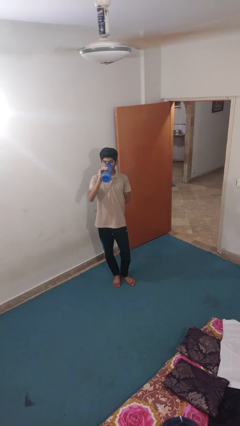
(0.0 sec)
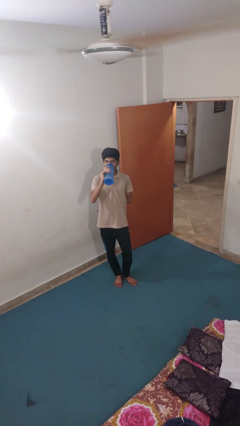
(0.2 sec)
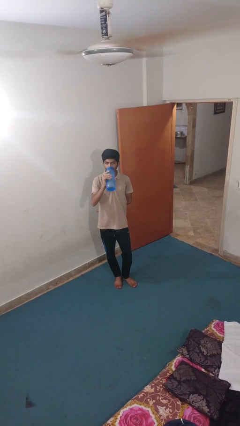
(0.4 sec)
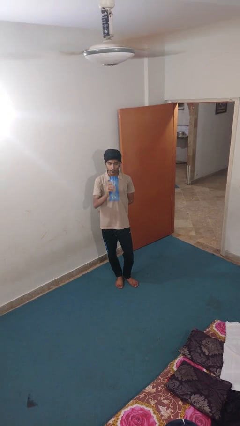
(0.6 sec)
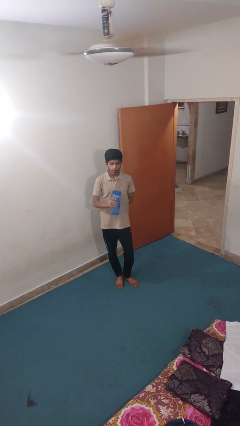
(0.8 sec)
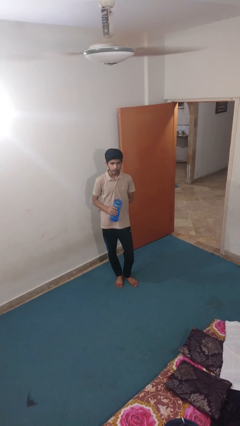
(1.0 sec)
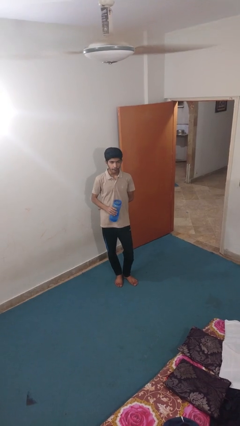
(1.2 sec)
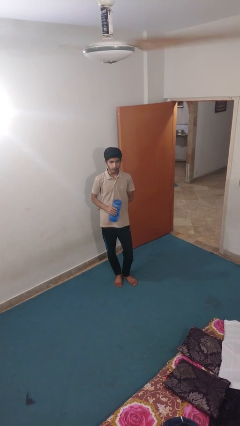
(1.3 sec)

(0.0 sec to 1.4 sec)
person drinks from bottle

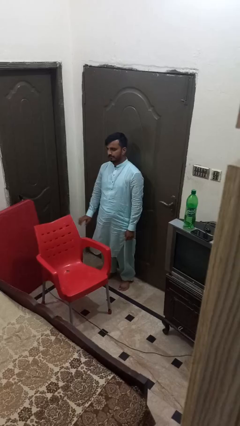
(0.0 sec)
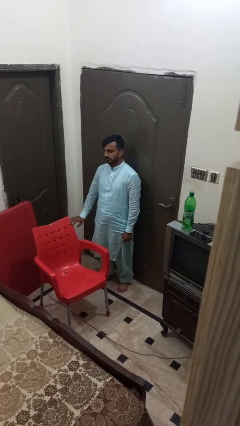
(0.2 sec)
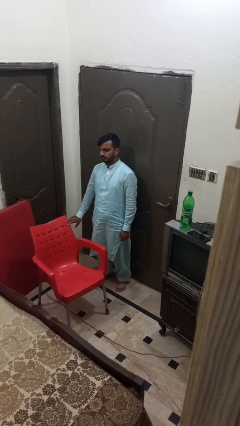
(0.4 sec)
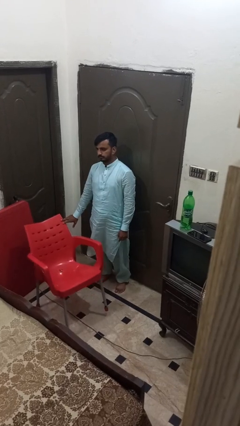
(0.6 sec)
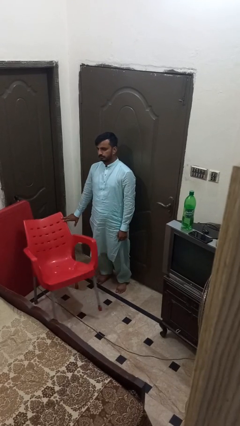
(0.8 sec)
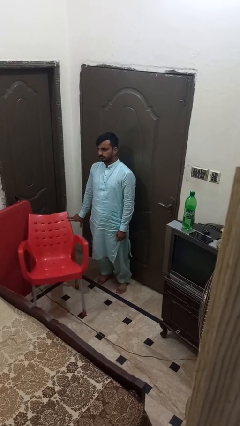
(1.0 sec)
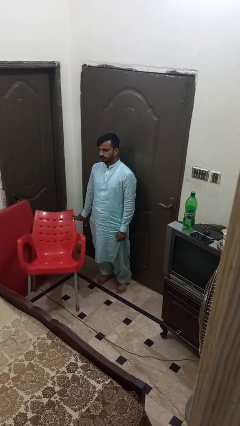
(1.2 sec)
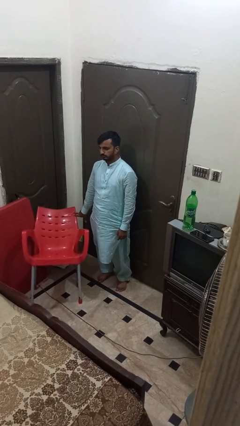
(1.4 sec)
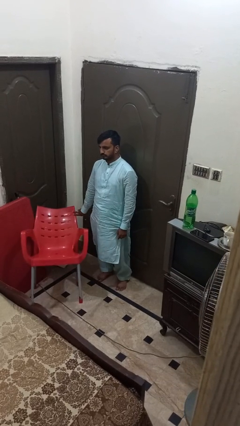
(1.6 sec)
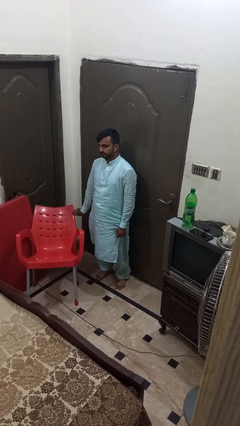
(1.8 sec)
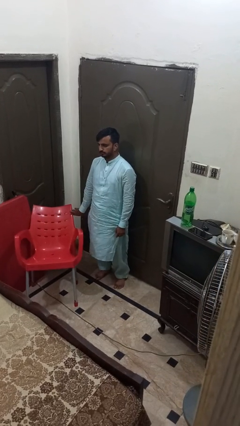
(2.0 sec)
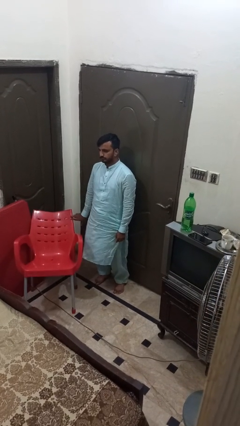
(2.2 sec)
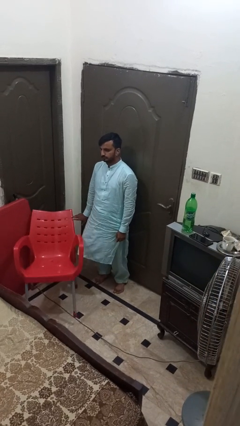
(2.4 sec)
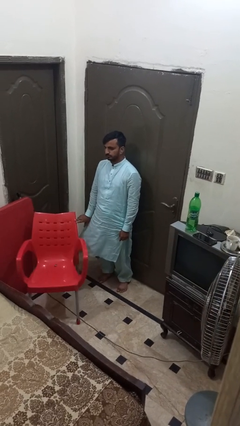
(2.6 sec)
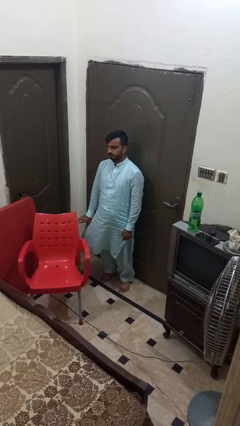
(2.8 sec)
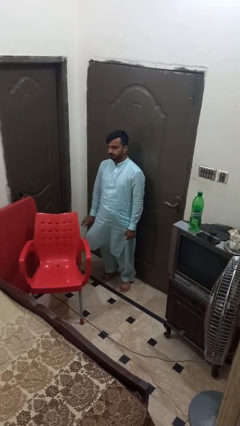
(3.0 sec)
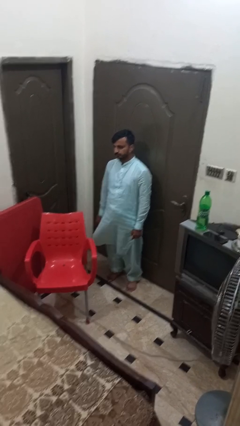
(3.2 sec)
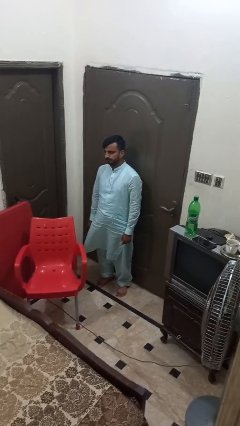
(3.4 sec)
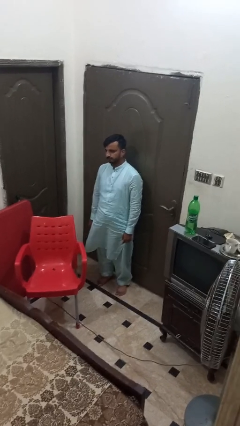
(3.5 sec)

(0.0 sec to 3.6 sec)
person knocks over furniture

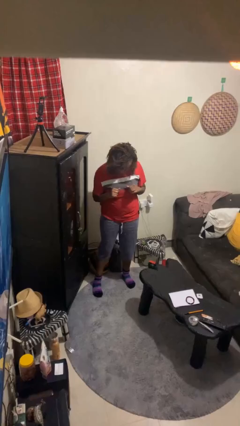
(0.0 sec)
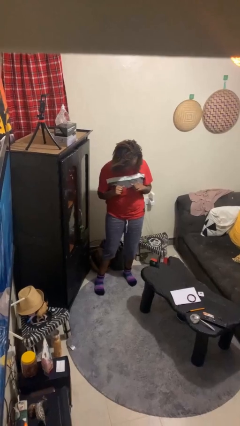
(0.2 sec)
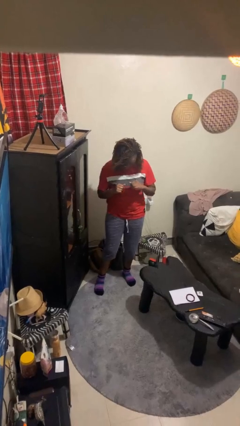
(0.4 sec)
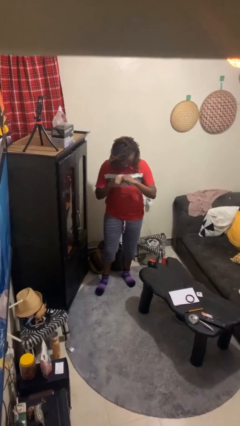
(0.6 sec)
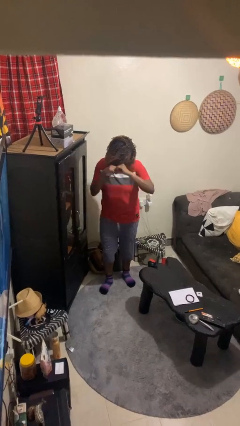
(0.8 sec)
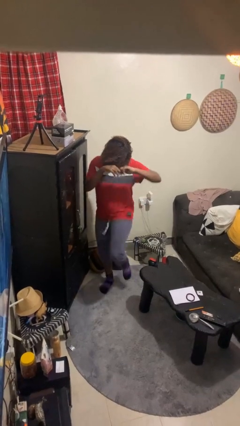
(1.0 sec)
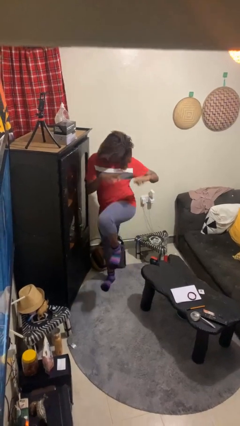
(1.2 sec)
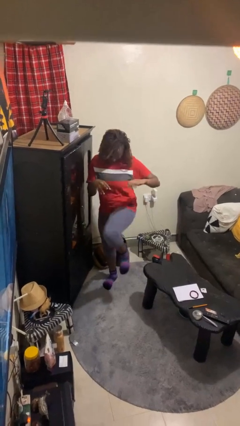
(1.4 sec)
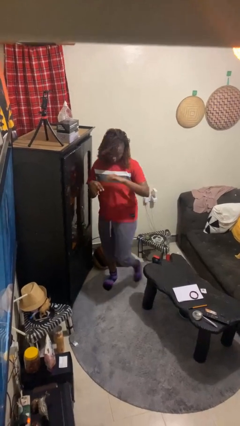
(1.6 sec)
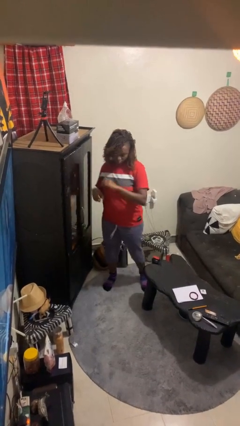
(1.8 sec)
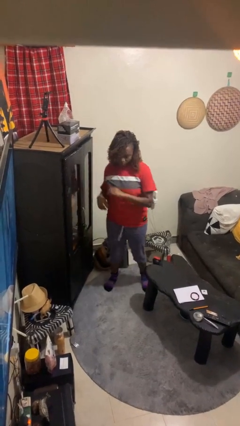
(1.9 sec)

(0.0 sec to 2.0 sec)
person karate kicks

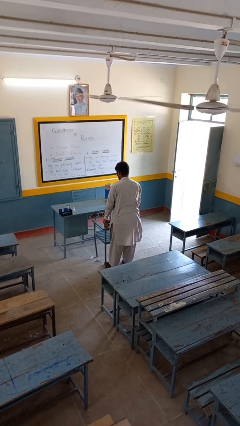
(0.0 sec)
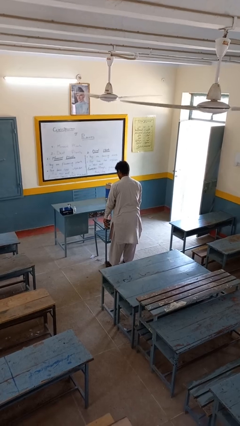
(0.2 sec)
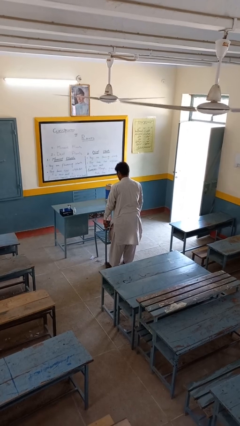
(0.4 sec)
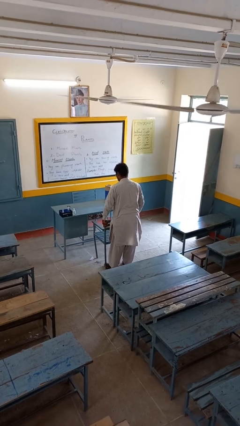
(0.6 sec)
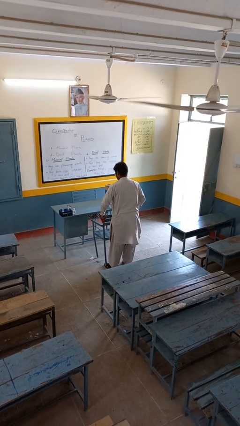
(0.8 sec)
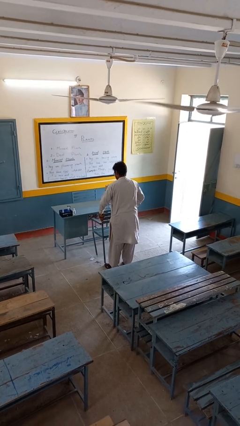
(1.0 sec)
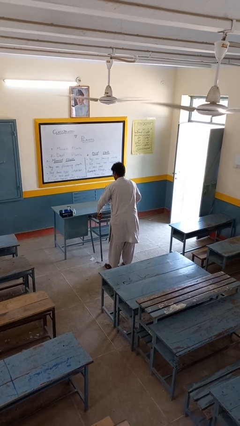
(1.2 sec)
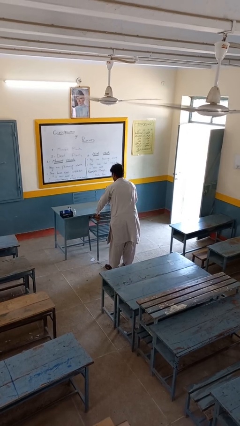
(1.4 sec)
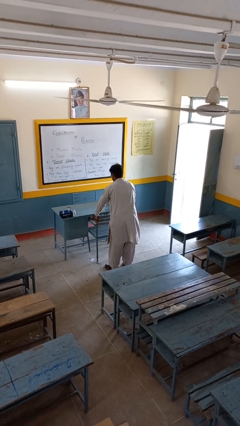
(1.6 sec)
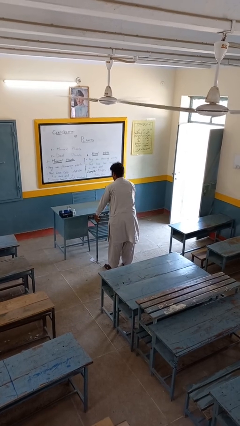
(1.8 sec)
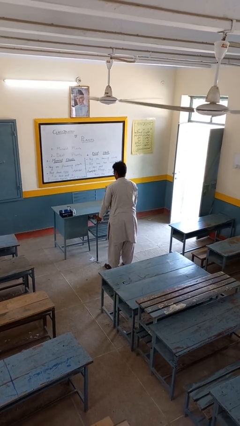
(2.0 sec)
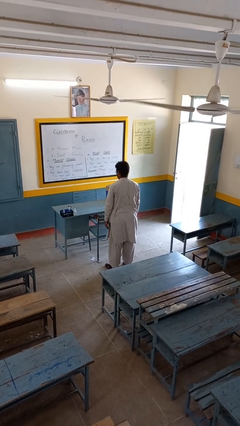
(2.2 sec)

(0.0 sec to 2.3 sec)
person pushes in chair

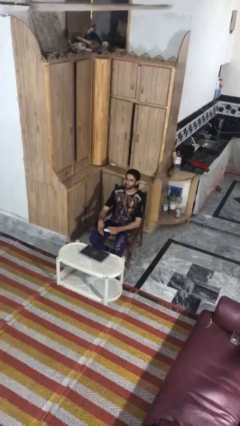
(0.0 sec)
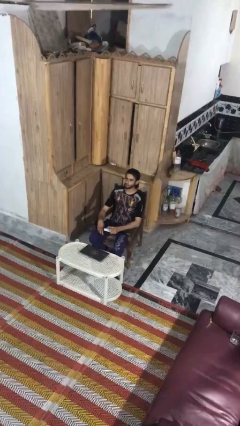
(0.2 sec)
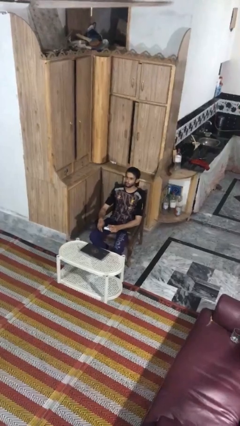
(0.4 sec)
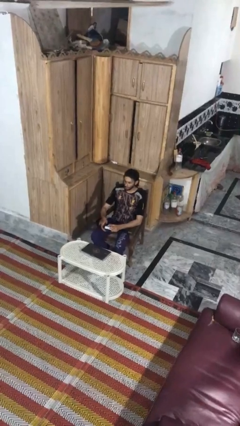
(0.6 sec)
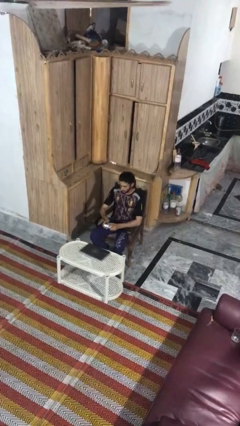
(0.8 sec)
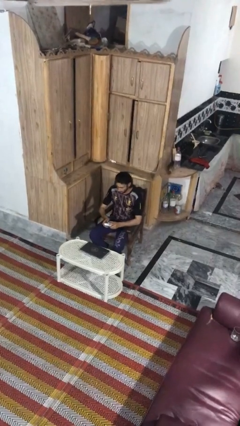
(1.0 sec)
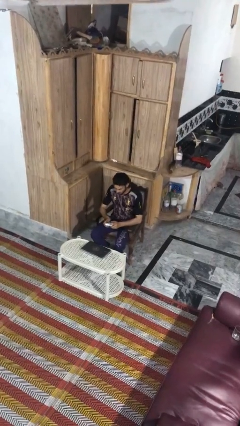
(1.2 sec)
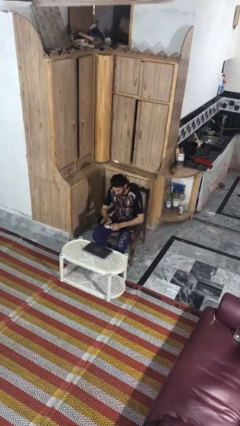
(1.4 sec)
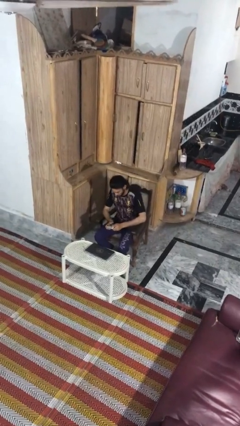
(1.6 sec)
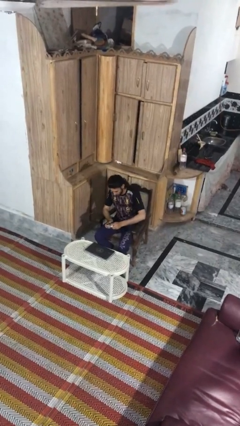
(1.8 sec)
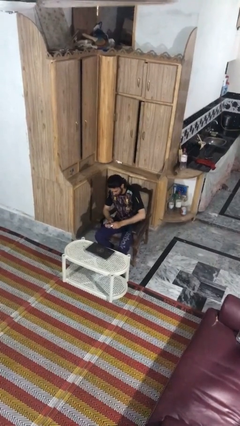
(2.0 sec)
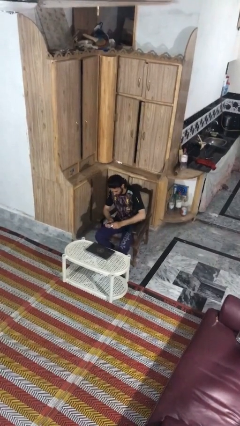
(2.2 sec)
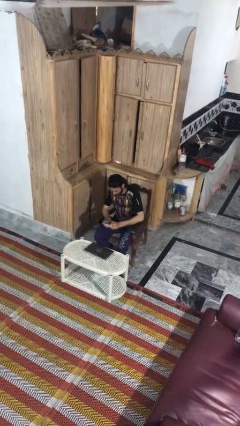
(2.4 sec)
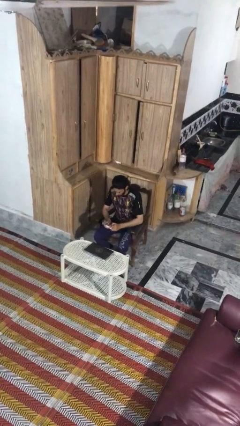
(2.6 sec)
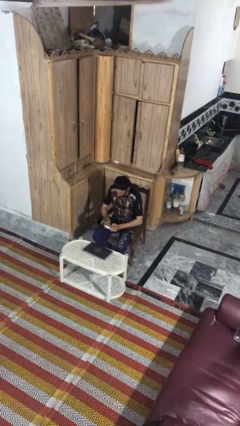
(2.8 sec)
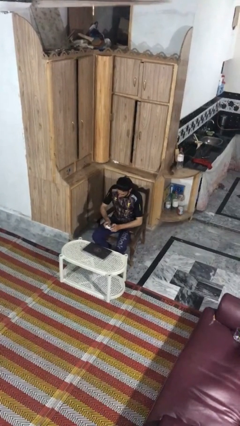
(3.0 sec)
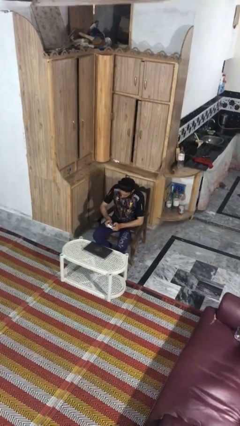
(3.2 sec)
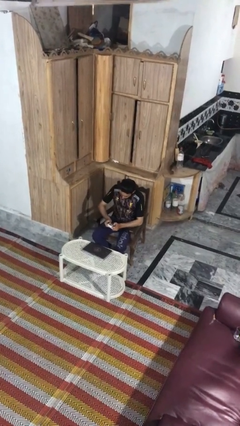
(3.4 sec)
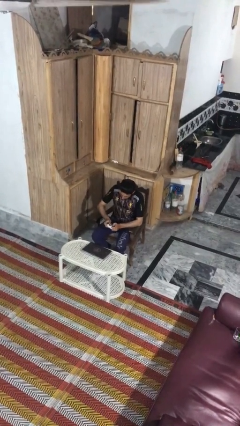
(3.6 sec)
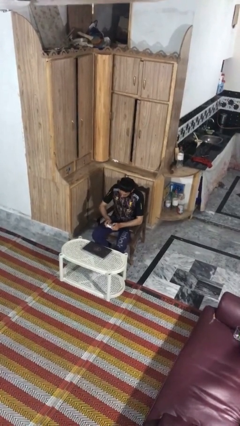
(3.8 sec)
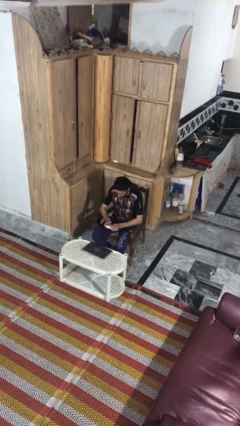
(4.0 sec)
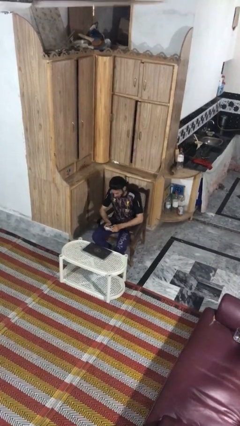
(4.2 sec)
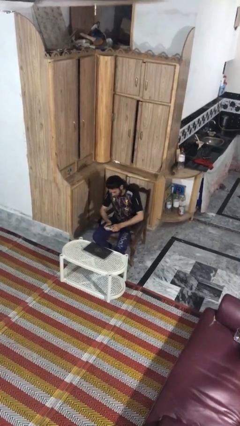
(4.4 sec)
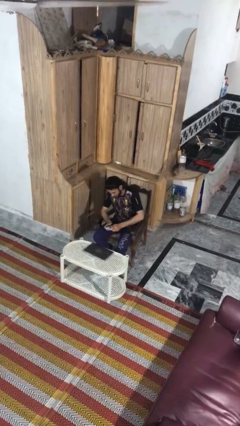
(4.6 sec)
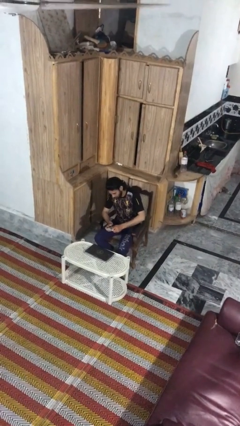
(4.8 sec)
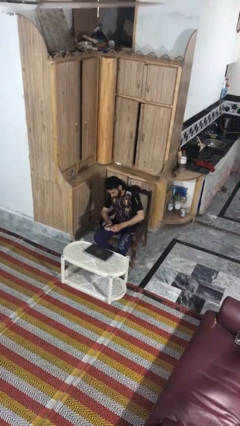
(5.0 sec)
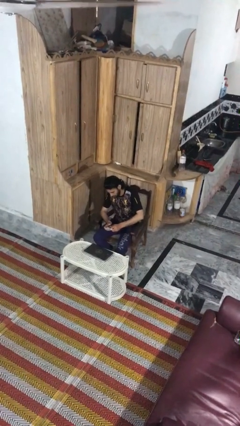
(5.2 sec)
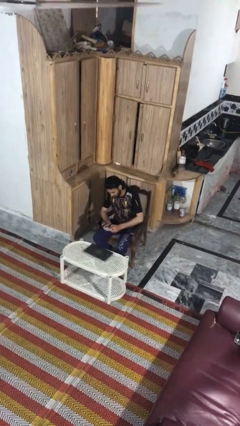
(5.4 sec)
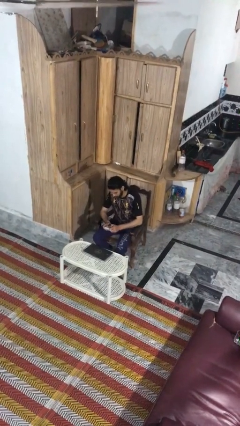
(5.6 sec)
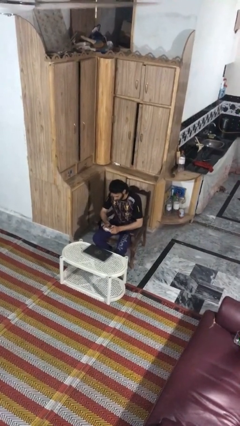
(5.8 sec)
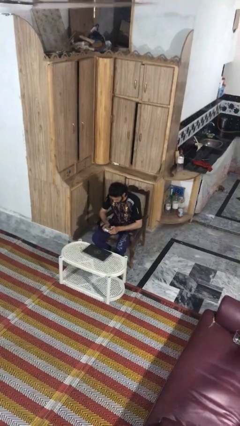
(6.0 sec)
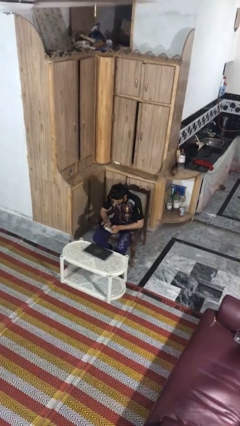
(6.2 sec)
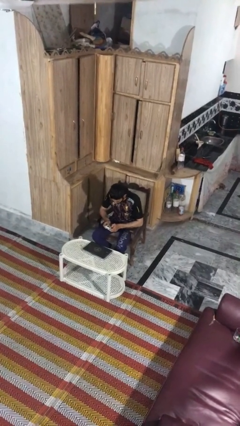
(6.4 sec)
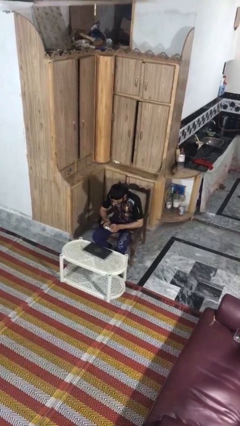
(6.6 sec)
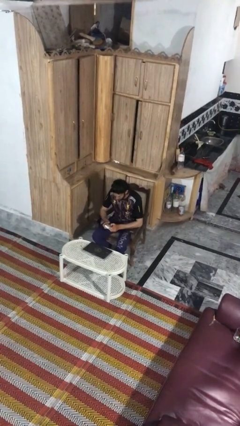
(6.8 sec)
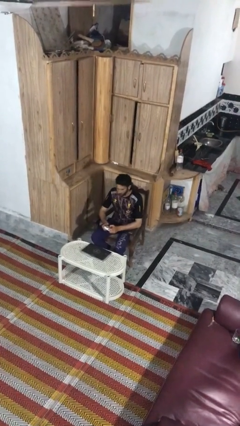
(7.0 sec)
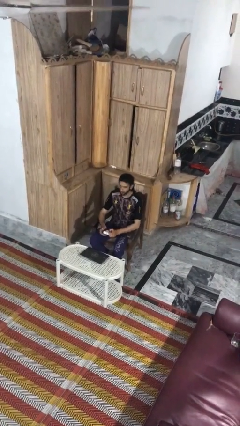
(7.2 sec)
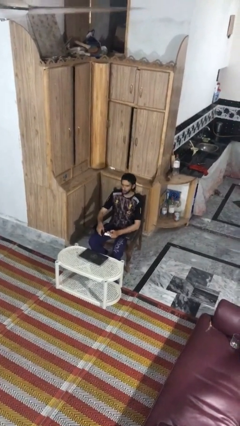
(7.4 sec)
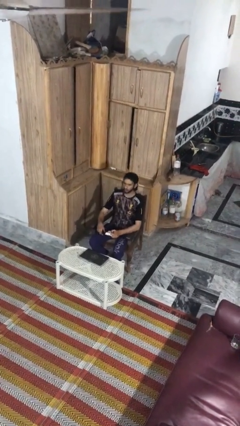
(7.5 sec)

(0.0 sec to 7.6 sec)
person interacts with handheld game

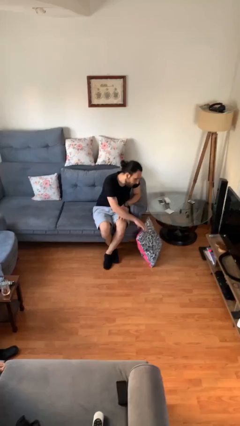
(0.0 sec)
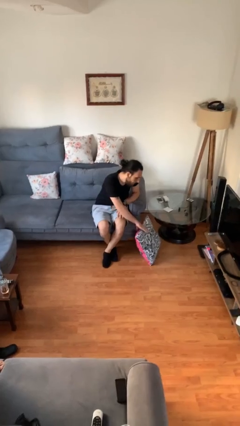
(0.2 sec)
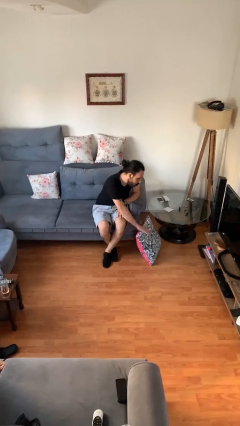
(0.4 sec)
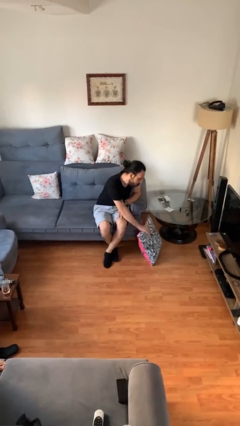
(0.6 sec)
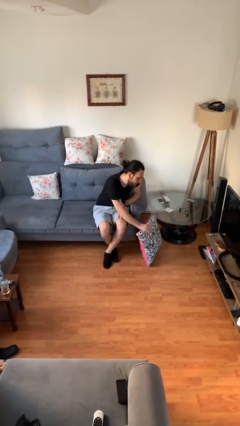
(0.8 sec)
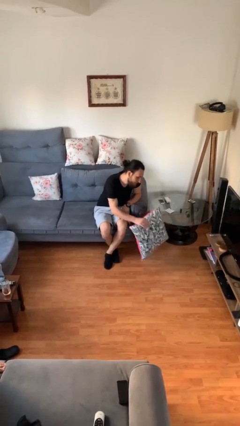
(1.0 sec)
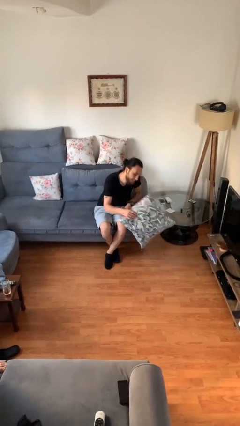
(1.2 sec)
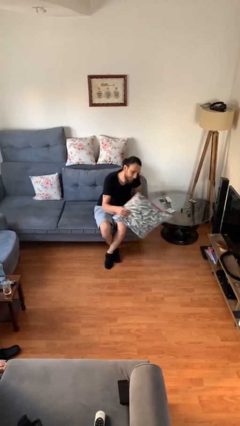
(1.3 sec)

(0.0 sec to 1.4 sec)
person picks up object from floor
